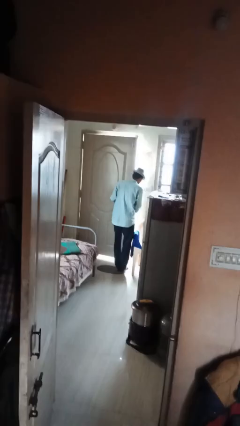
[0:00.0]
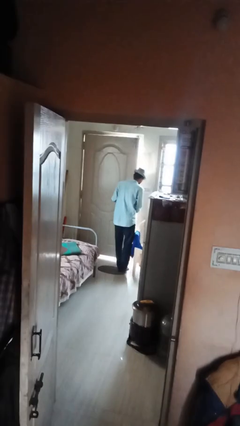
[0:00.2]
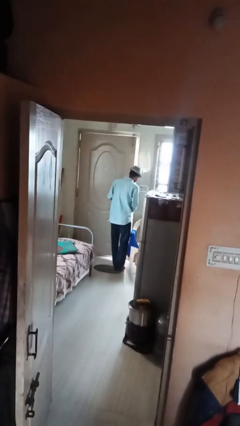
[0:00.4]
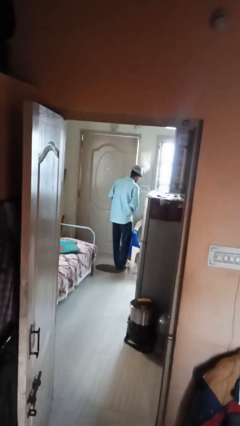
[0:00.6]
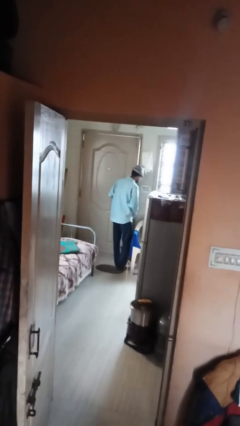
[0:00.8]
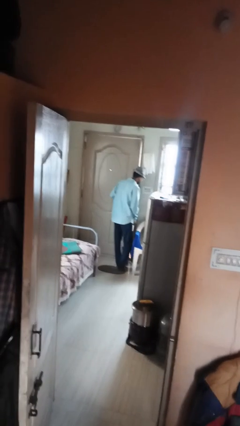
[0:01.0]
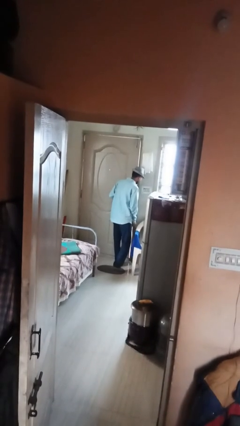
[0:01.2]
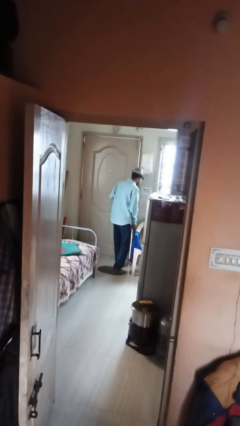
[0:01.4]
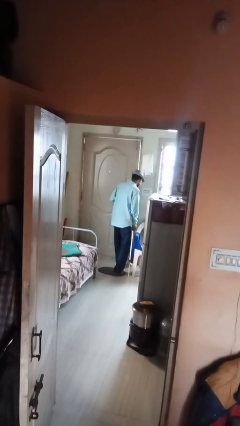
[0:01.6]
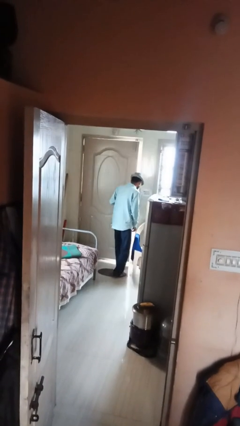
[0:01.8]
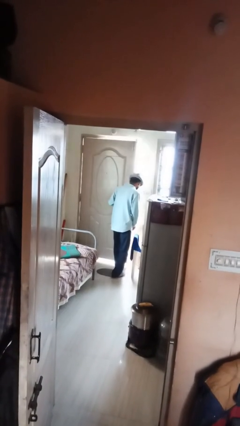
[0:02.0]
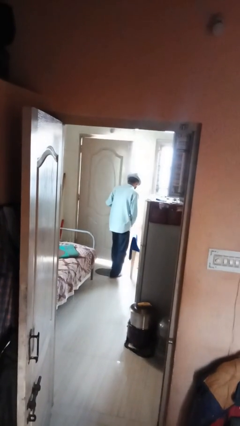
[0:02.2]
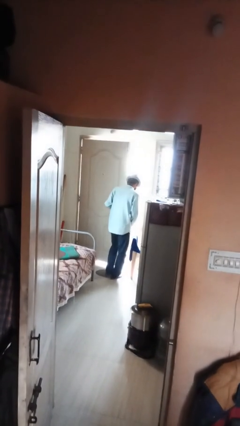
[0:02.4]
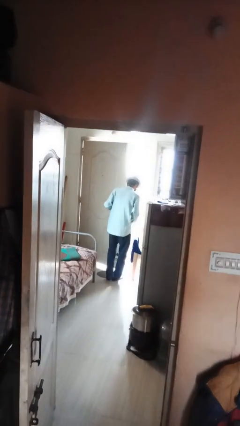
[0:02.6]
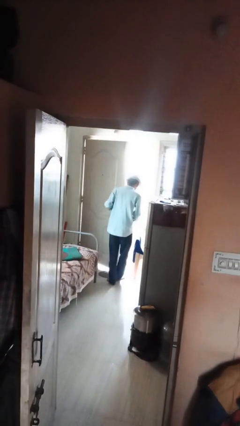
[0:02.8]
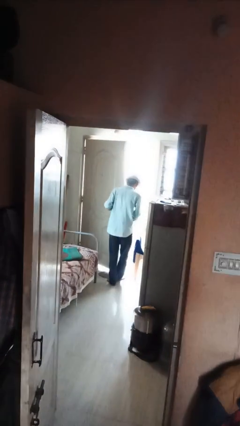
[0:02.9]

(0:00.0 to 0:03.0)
person closes facility door

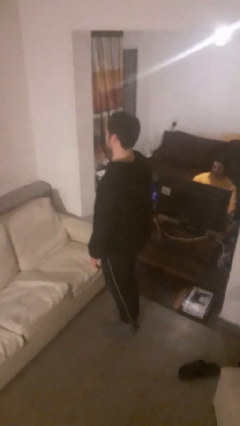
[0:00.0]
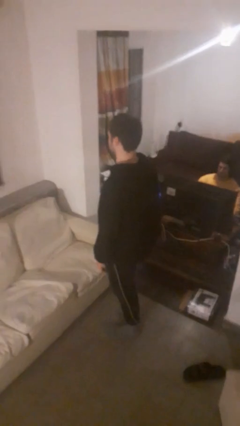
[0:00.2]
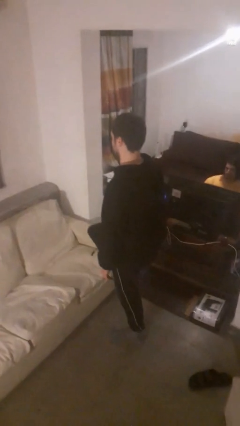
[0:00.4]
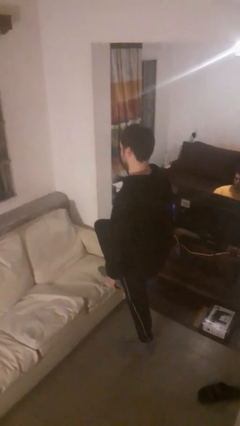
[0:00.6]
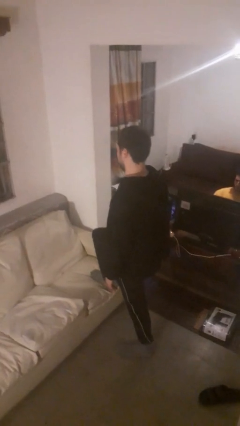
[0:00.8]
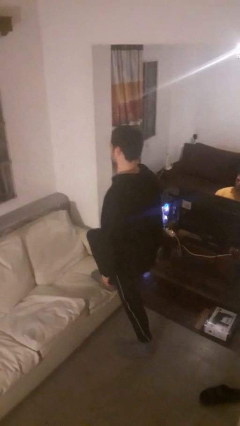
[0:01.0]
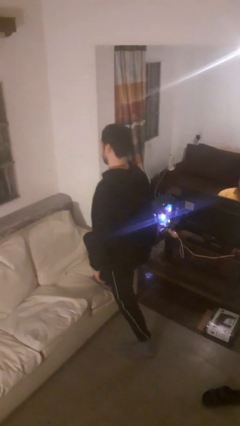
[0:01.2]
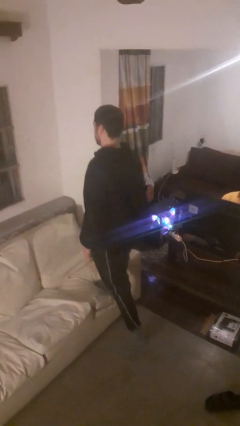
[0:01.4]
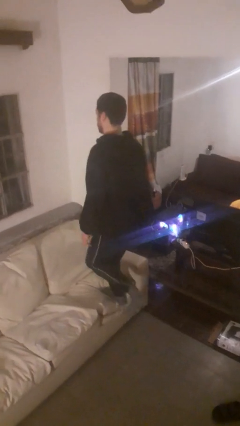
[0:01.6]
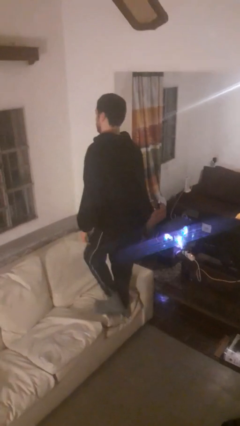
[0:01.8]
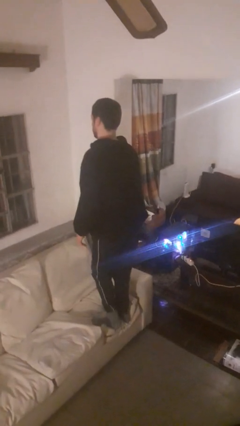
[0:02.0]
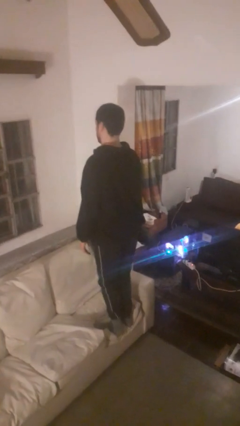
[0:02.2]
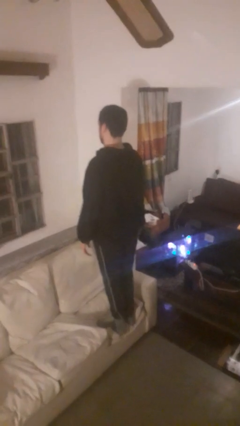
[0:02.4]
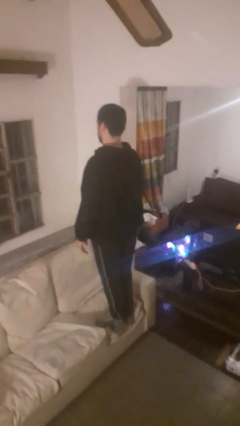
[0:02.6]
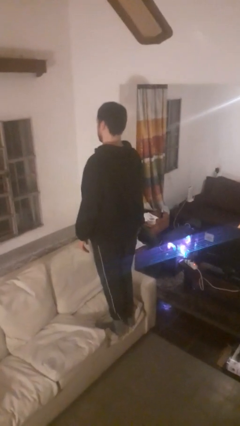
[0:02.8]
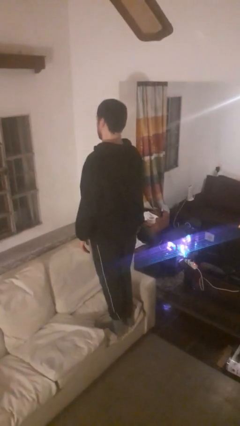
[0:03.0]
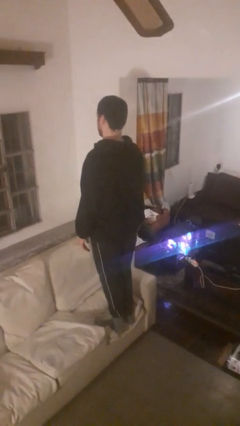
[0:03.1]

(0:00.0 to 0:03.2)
person climbs on couch

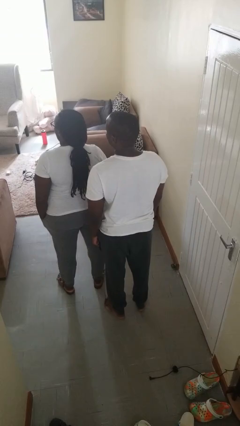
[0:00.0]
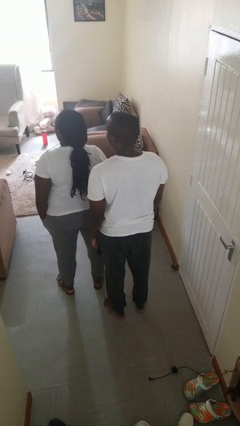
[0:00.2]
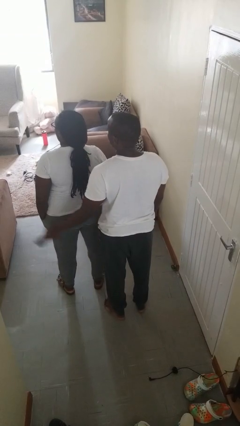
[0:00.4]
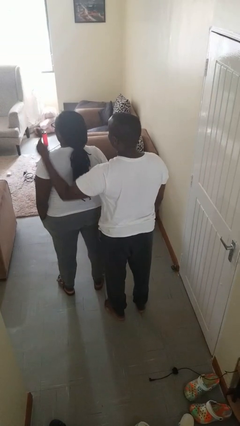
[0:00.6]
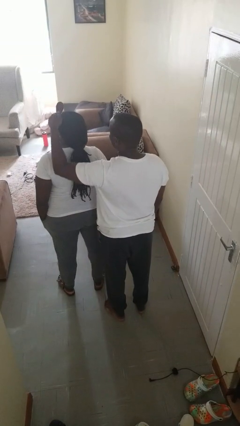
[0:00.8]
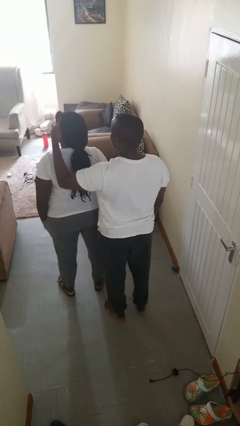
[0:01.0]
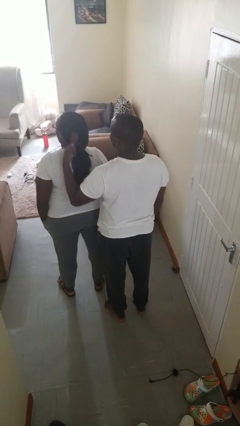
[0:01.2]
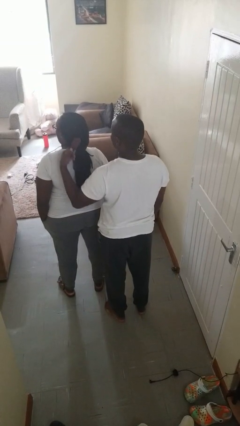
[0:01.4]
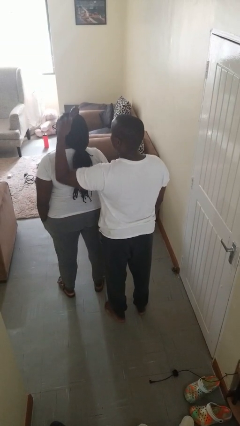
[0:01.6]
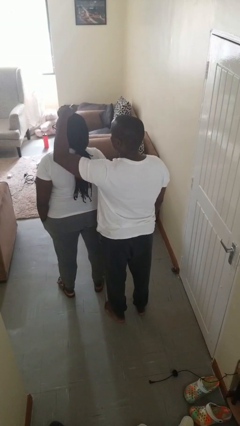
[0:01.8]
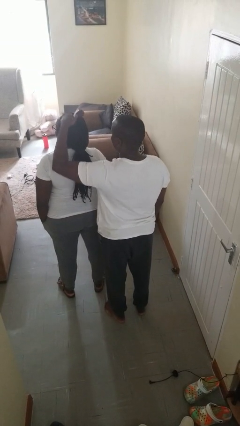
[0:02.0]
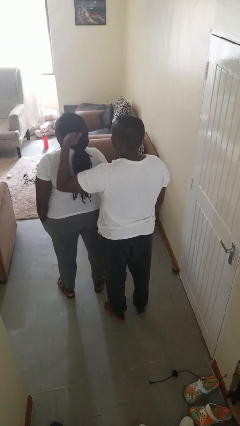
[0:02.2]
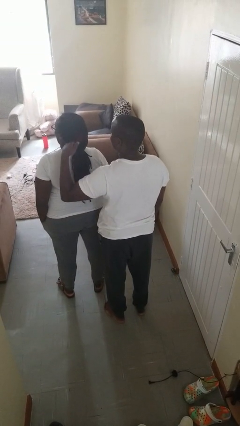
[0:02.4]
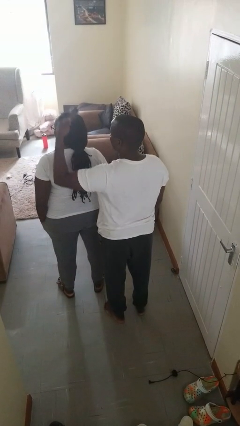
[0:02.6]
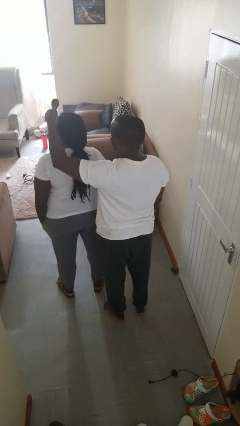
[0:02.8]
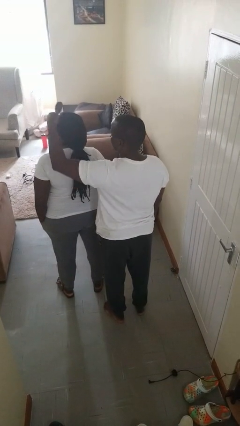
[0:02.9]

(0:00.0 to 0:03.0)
person brushes hair of person

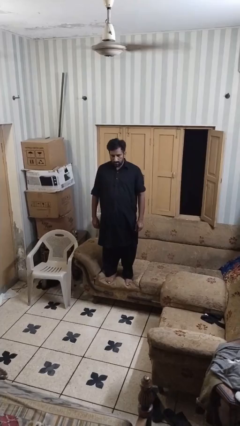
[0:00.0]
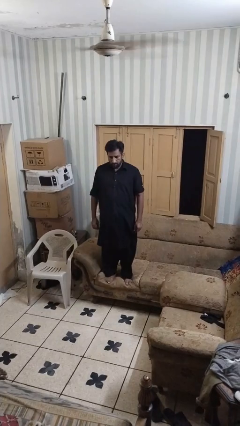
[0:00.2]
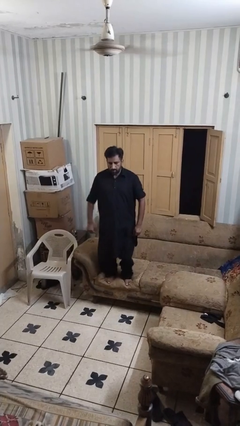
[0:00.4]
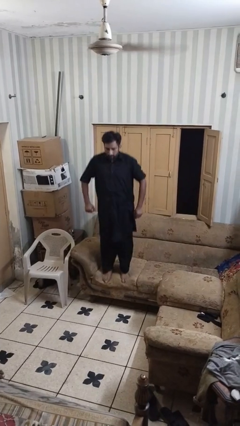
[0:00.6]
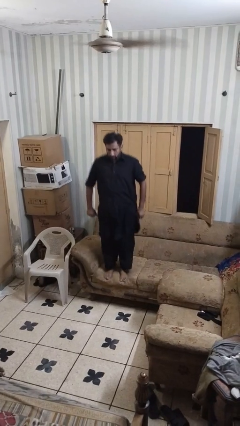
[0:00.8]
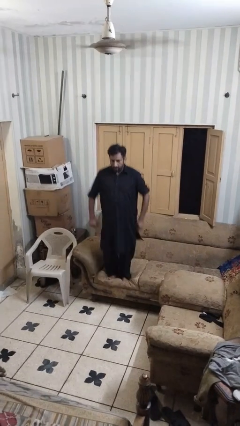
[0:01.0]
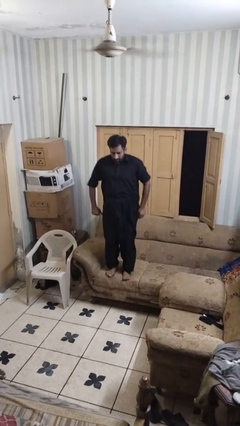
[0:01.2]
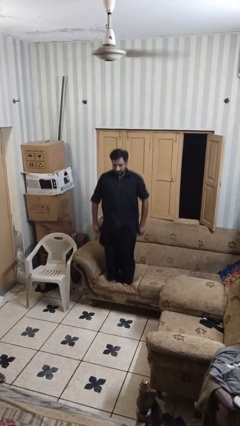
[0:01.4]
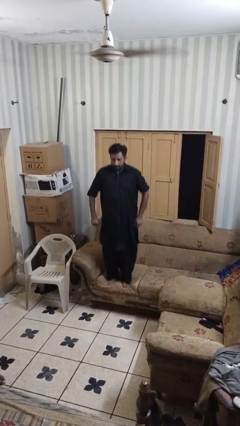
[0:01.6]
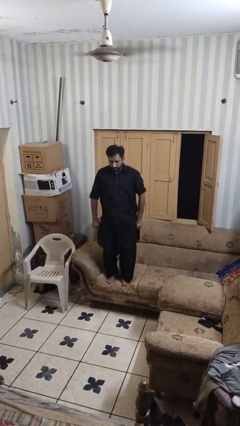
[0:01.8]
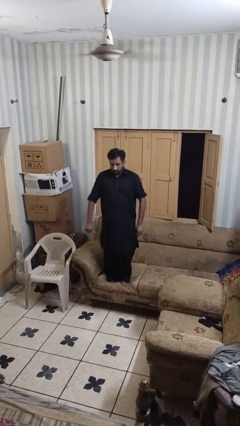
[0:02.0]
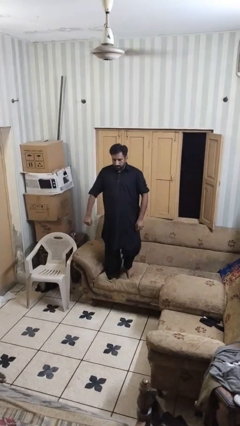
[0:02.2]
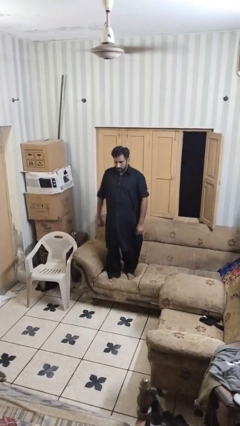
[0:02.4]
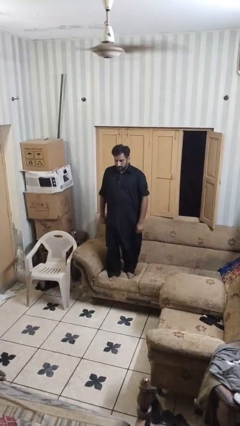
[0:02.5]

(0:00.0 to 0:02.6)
person jumps on couch

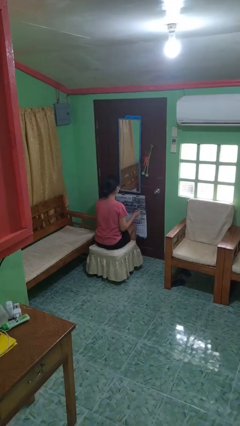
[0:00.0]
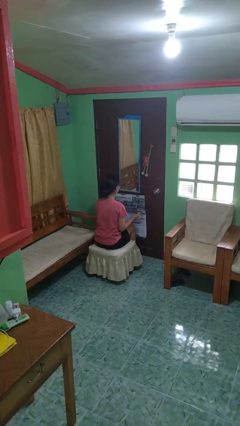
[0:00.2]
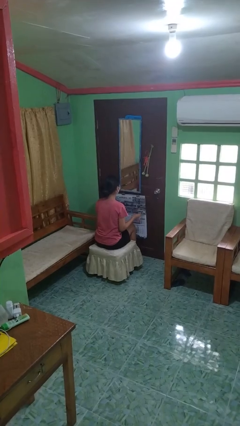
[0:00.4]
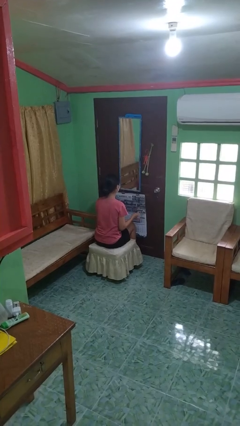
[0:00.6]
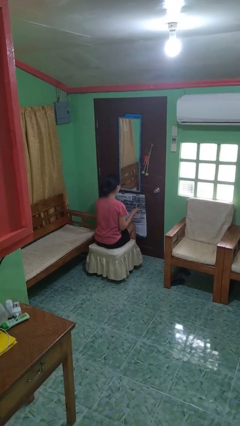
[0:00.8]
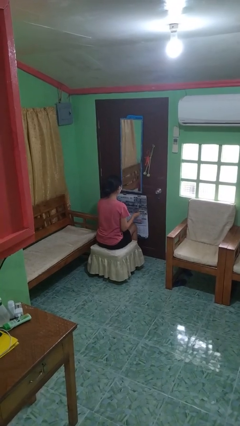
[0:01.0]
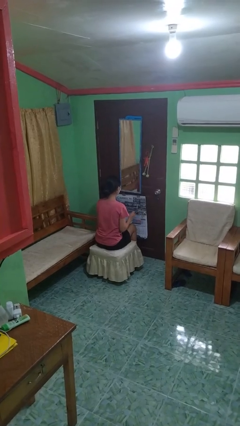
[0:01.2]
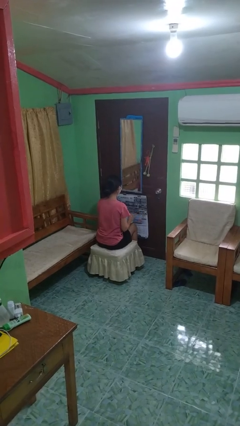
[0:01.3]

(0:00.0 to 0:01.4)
person snaps fingers

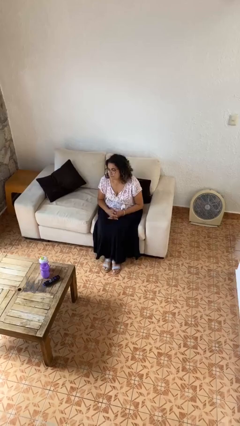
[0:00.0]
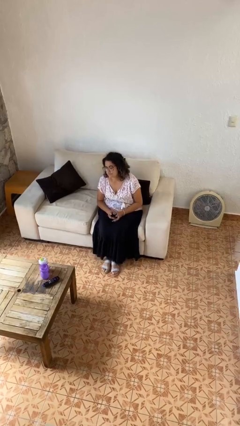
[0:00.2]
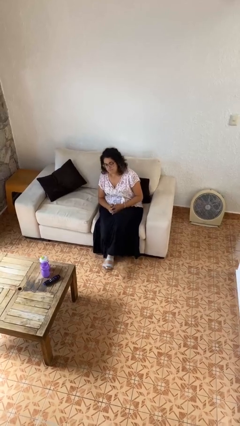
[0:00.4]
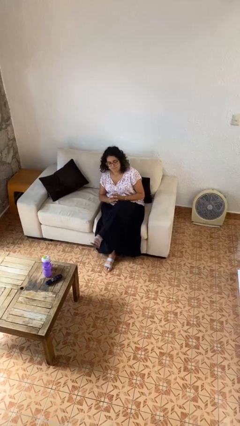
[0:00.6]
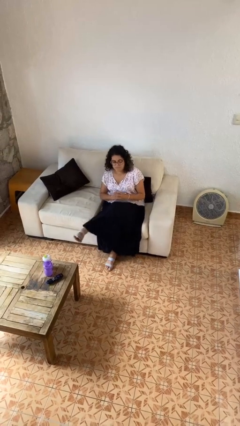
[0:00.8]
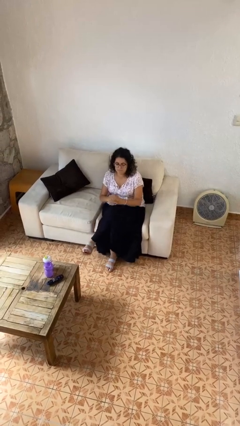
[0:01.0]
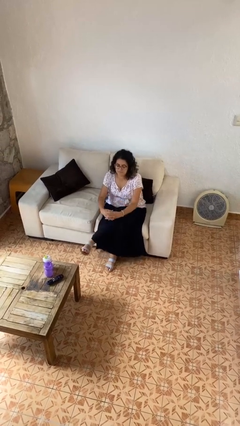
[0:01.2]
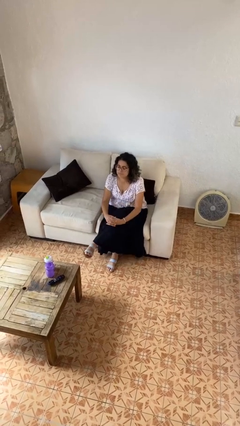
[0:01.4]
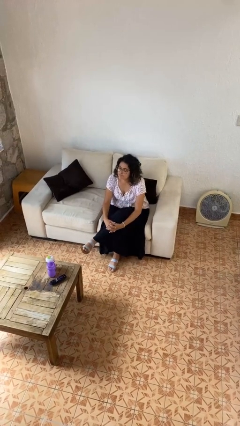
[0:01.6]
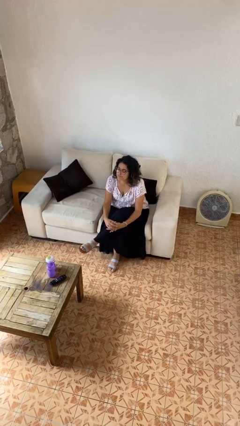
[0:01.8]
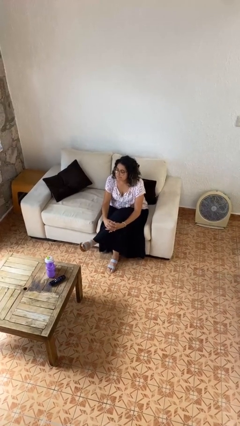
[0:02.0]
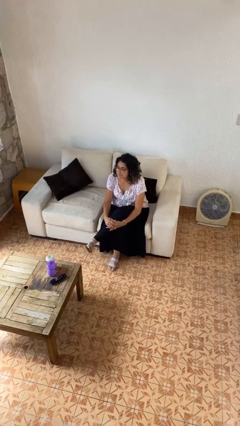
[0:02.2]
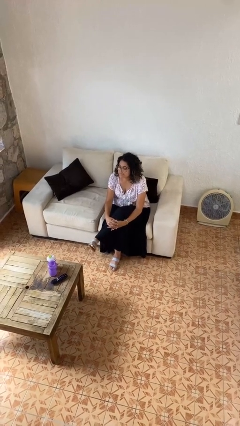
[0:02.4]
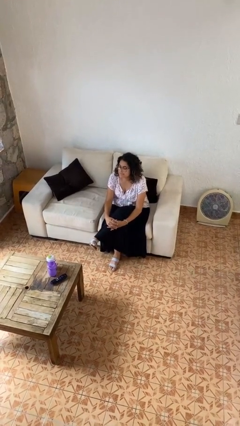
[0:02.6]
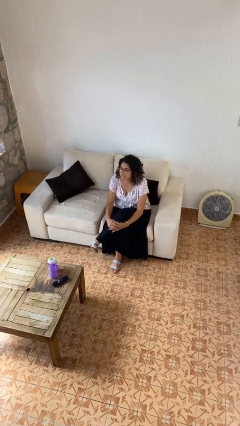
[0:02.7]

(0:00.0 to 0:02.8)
person crosses legs

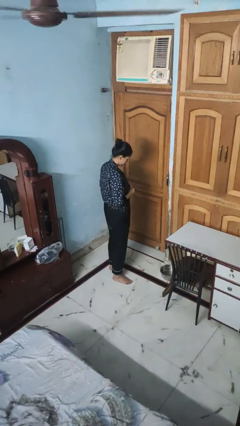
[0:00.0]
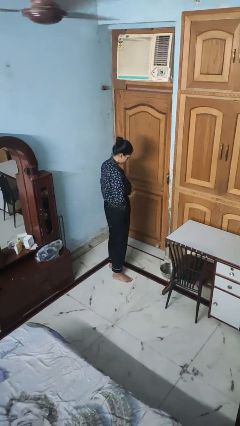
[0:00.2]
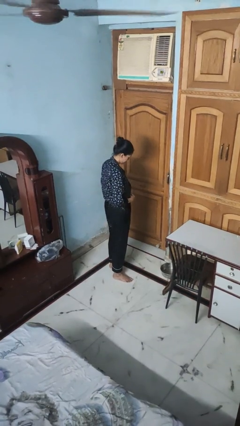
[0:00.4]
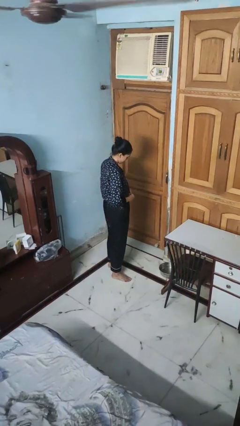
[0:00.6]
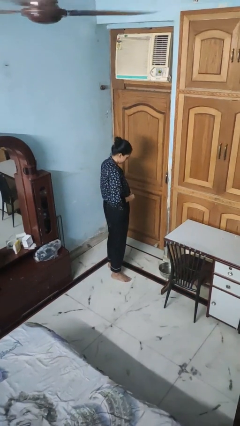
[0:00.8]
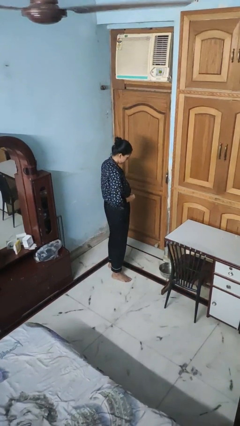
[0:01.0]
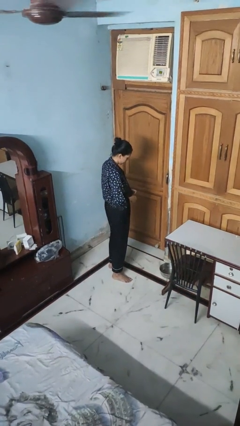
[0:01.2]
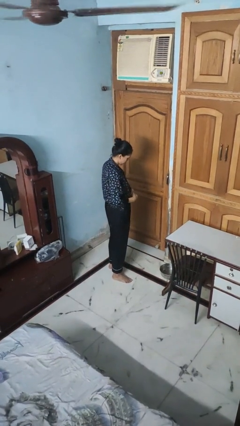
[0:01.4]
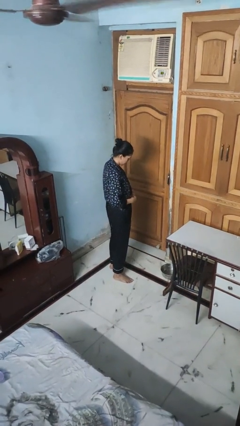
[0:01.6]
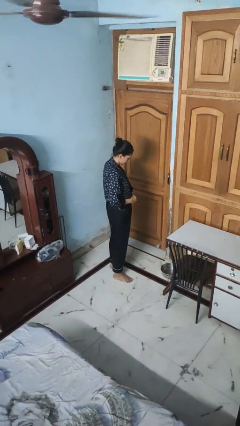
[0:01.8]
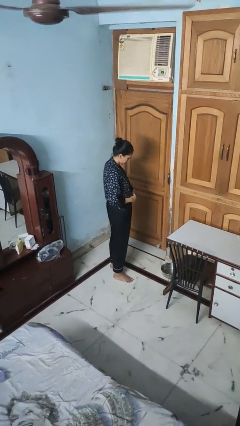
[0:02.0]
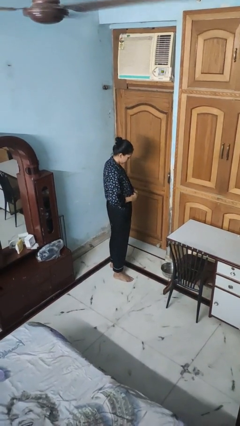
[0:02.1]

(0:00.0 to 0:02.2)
person unbuttons shirt